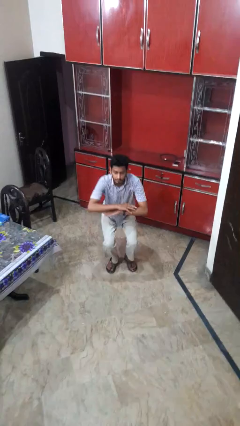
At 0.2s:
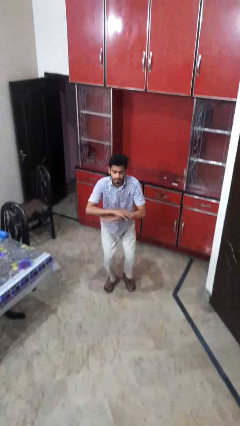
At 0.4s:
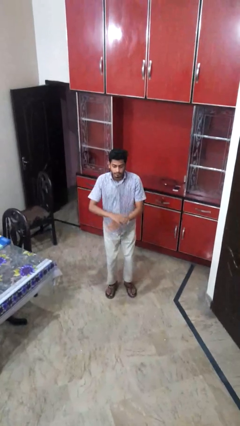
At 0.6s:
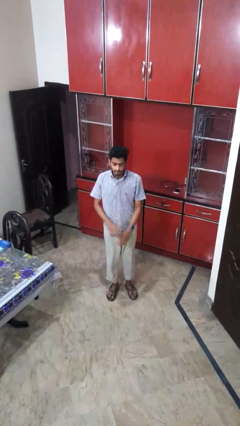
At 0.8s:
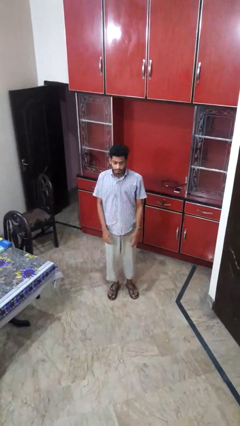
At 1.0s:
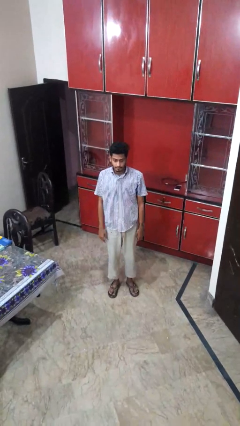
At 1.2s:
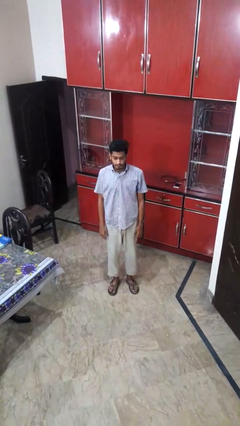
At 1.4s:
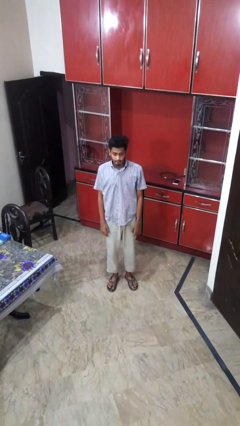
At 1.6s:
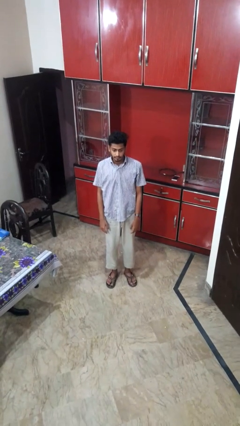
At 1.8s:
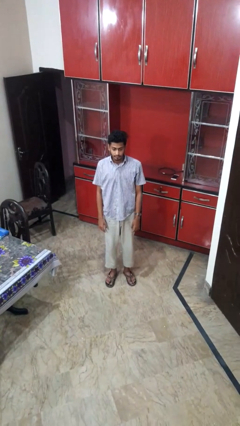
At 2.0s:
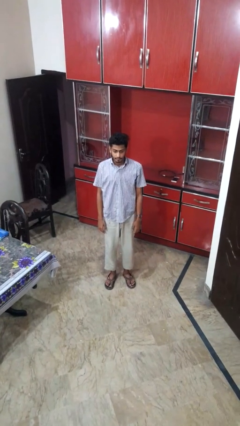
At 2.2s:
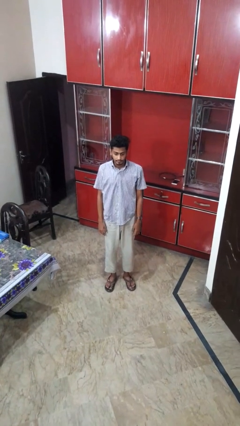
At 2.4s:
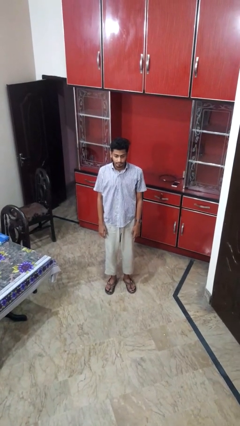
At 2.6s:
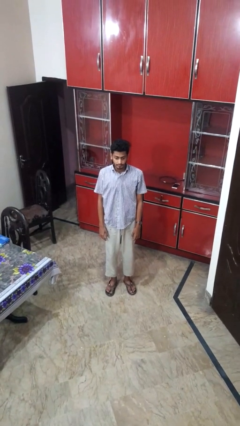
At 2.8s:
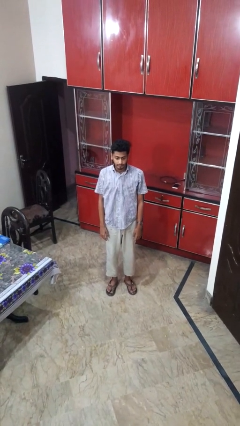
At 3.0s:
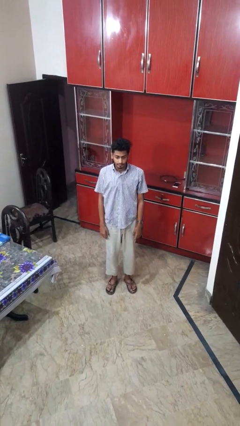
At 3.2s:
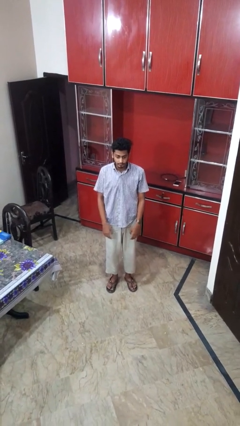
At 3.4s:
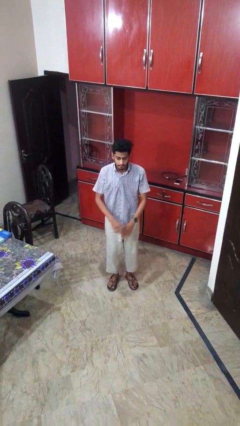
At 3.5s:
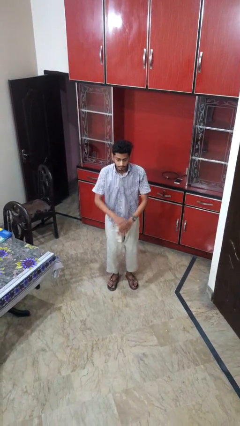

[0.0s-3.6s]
person stands up

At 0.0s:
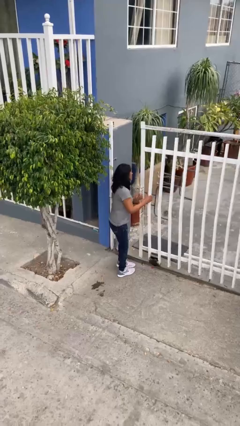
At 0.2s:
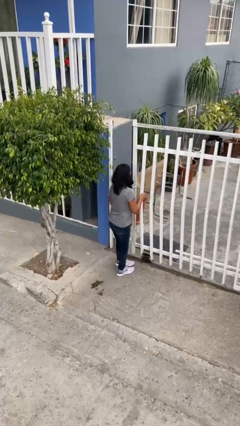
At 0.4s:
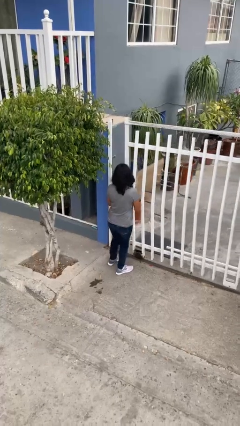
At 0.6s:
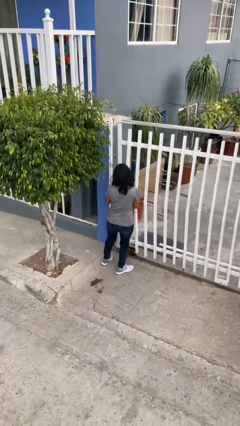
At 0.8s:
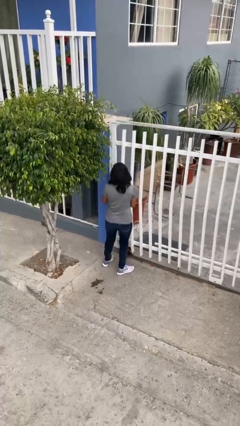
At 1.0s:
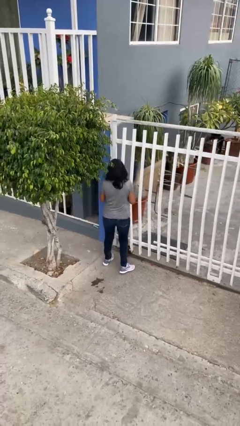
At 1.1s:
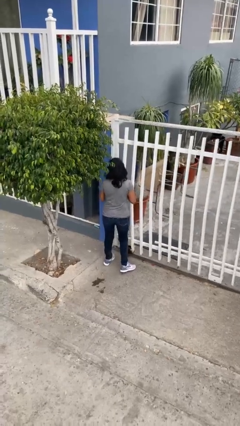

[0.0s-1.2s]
person closes facility door

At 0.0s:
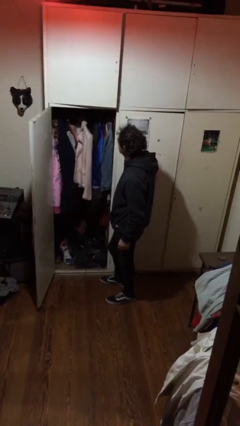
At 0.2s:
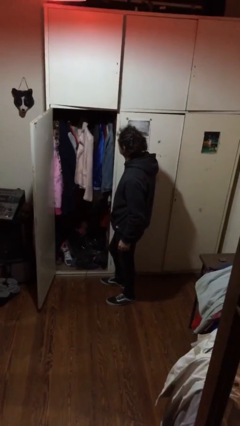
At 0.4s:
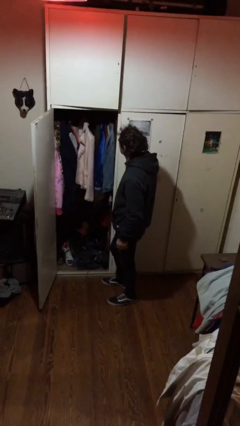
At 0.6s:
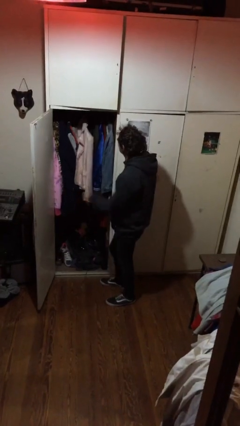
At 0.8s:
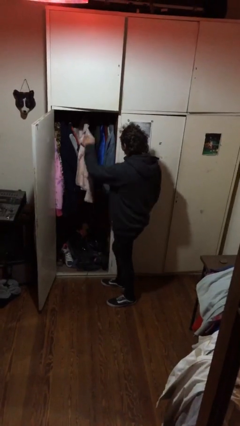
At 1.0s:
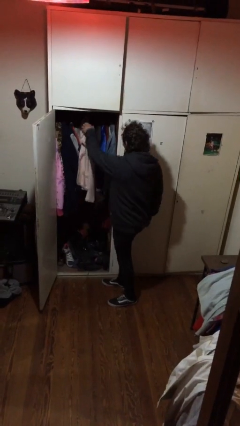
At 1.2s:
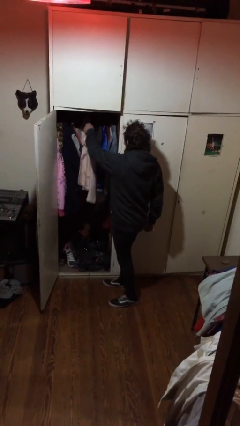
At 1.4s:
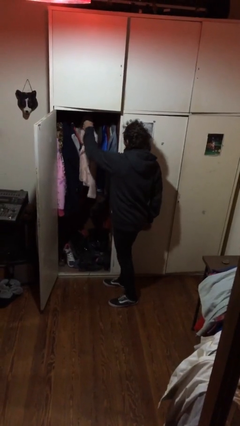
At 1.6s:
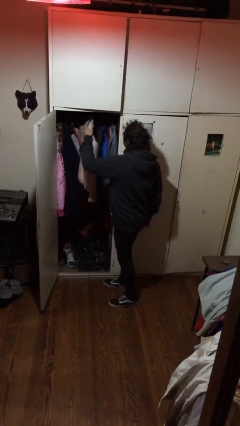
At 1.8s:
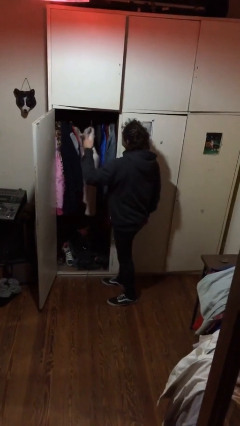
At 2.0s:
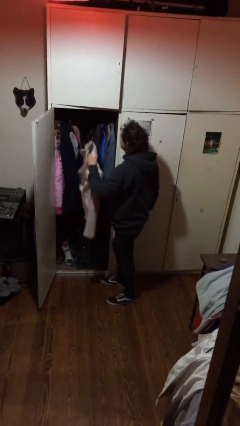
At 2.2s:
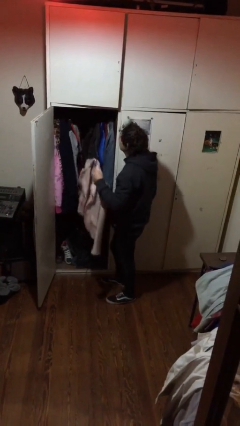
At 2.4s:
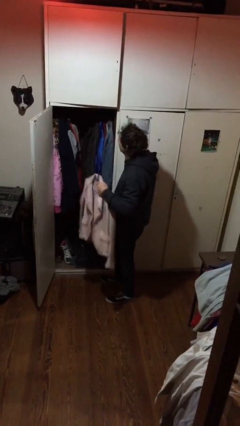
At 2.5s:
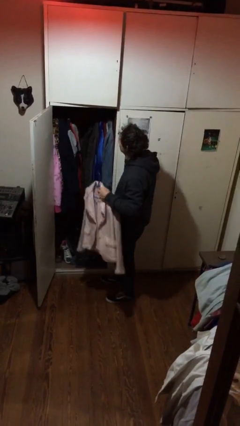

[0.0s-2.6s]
person takes clothes from closet

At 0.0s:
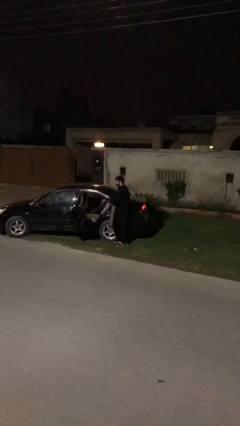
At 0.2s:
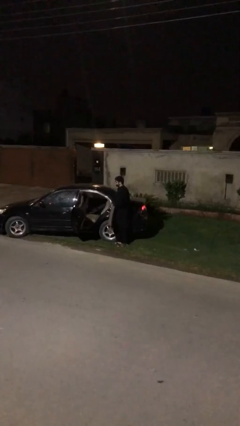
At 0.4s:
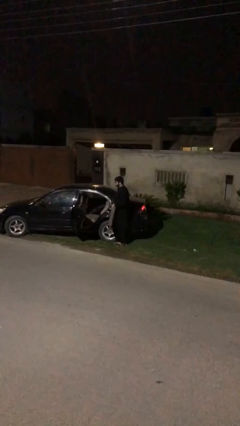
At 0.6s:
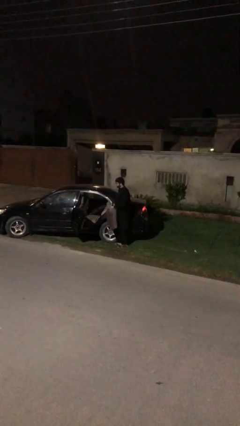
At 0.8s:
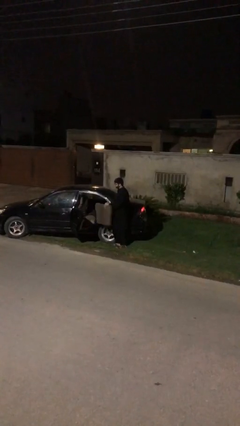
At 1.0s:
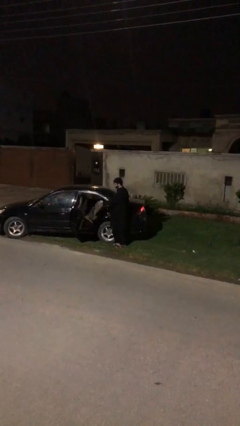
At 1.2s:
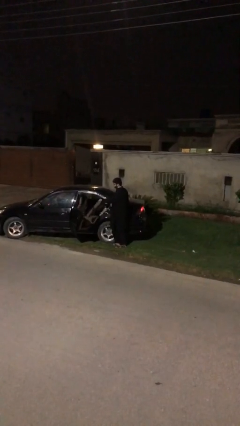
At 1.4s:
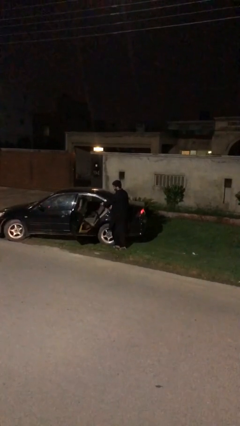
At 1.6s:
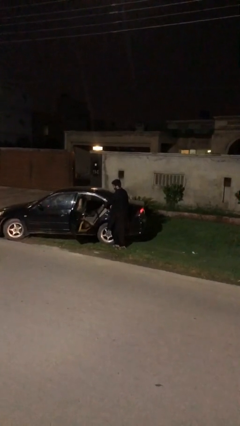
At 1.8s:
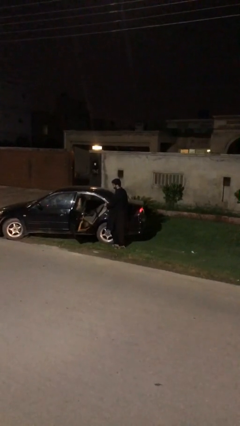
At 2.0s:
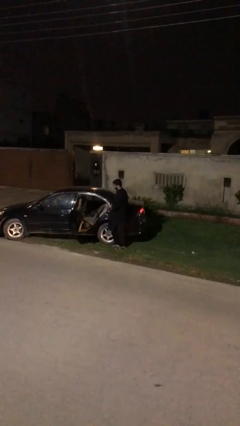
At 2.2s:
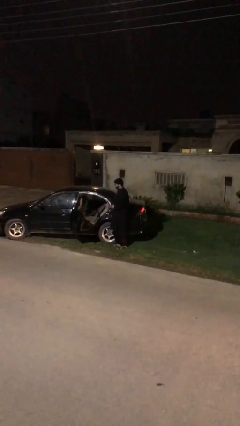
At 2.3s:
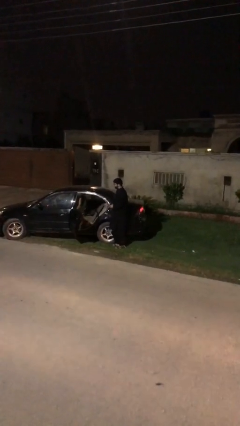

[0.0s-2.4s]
person loads car

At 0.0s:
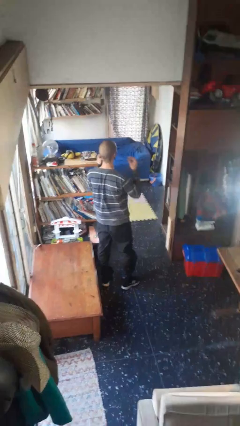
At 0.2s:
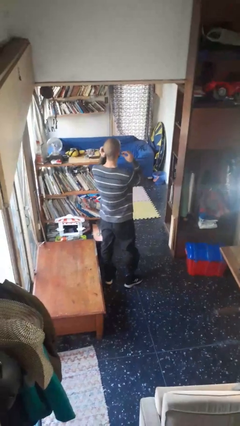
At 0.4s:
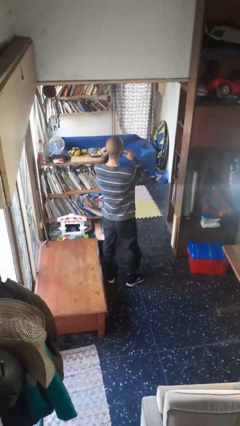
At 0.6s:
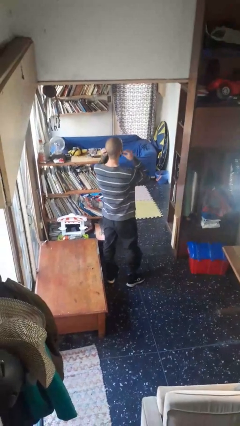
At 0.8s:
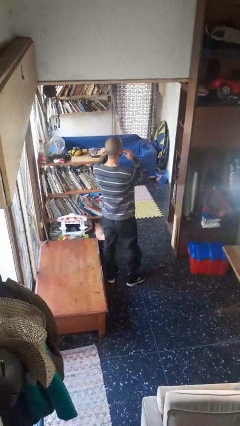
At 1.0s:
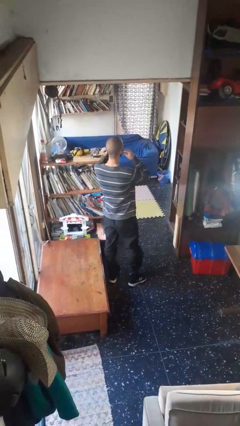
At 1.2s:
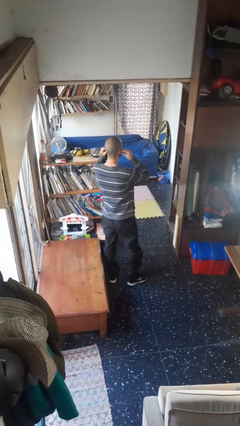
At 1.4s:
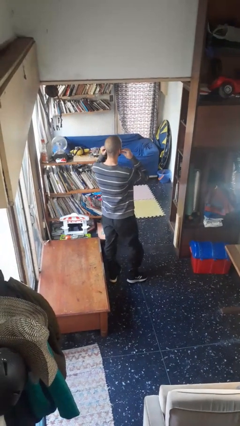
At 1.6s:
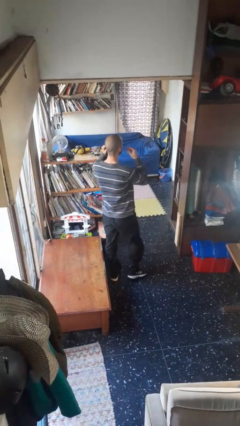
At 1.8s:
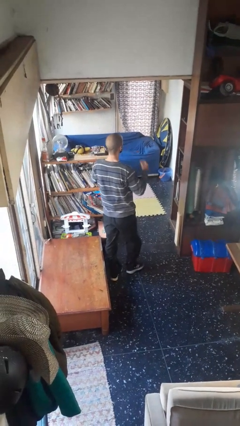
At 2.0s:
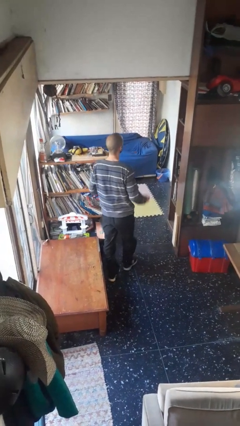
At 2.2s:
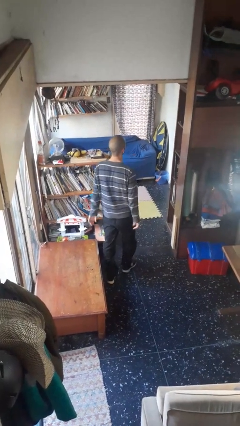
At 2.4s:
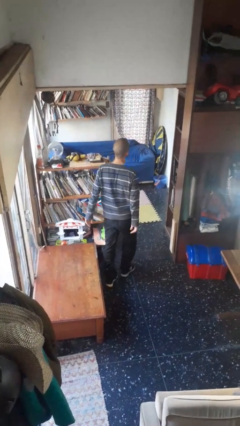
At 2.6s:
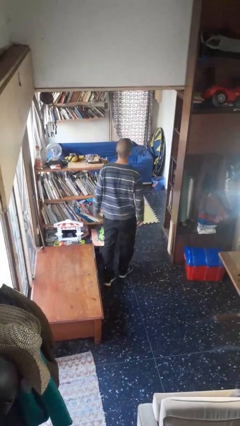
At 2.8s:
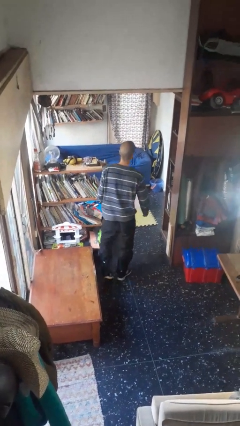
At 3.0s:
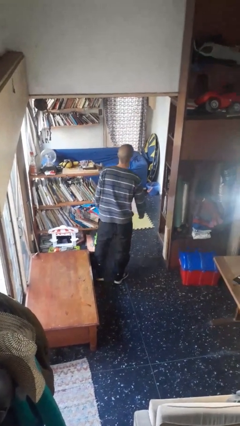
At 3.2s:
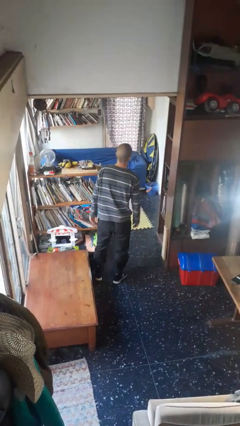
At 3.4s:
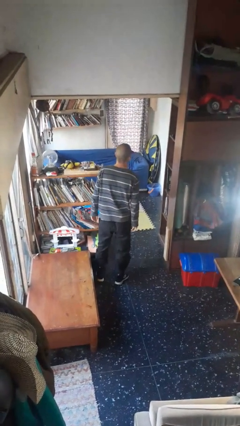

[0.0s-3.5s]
person puts on headphones

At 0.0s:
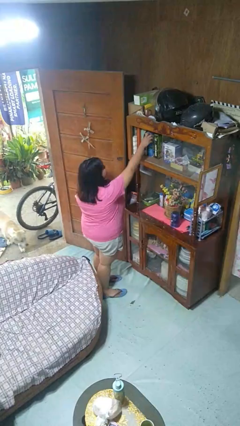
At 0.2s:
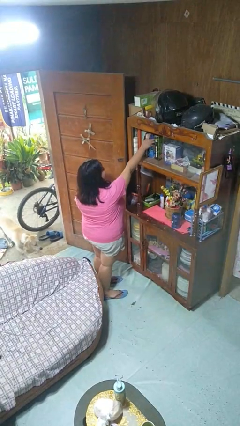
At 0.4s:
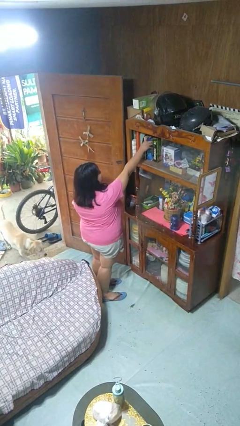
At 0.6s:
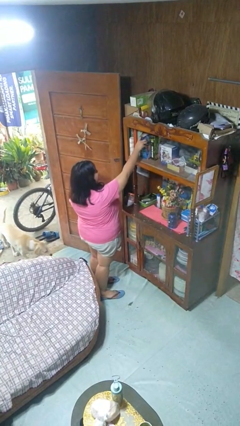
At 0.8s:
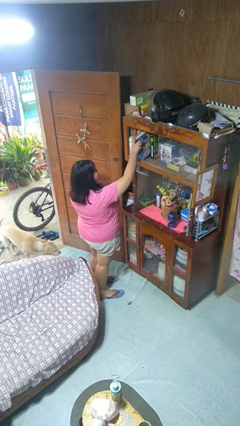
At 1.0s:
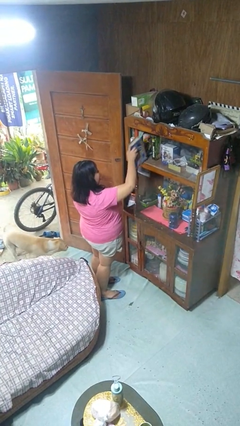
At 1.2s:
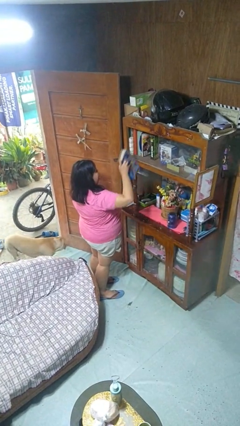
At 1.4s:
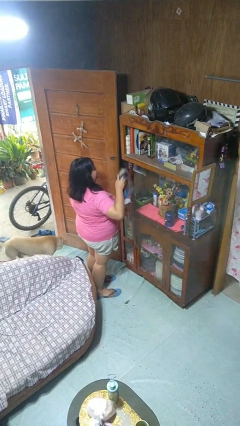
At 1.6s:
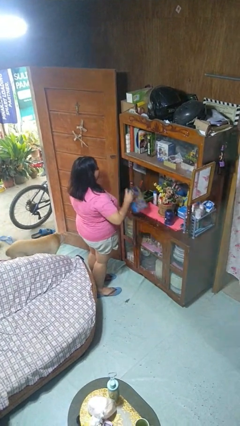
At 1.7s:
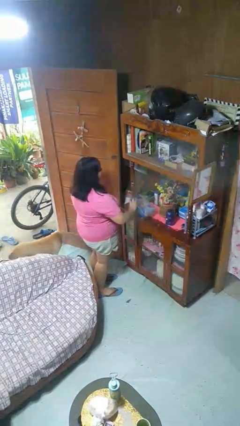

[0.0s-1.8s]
person picks up object from shelf

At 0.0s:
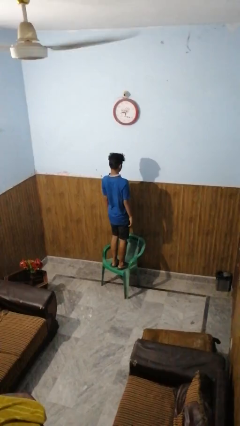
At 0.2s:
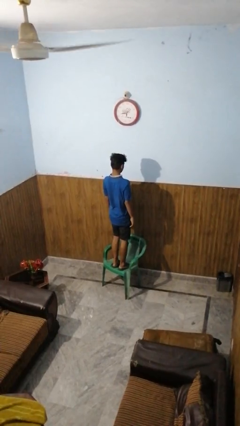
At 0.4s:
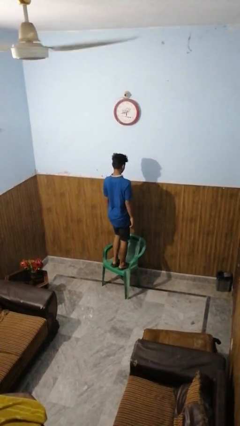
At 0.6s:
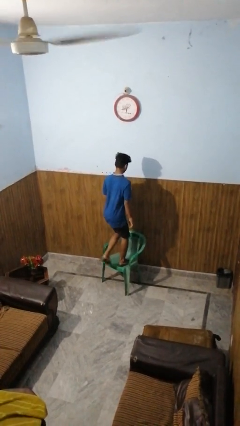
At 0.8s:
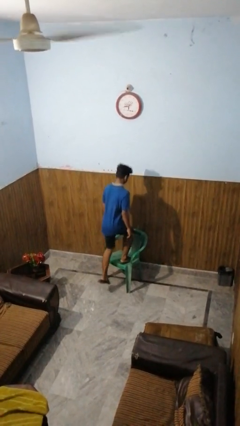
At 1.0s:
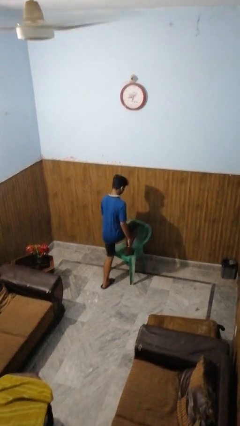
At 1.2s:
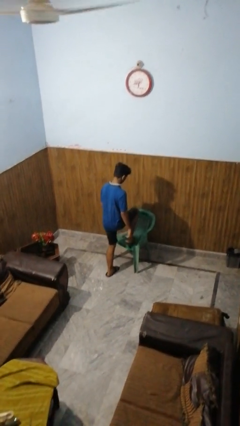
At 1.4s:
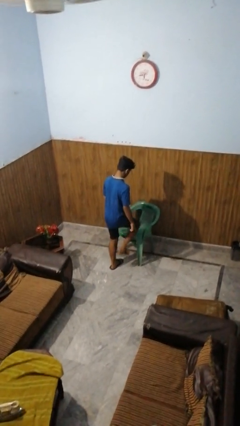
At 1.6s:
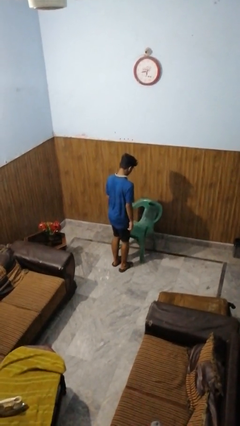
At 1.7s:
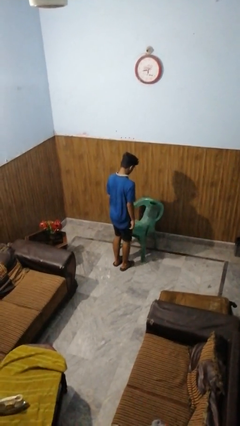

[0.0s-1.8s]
person climbs off chair

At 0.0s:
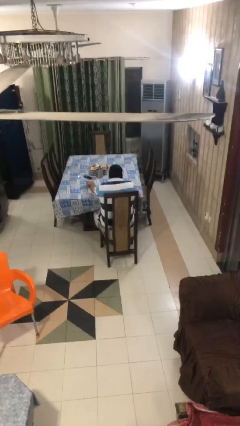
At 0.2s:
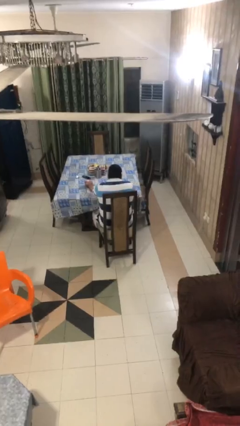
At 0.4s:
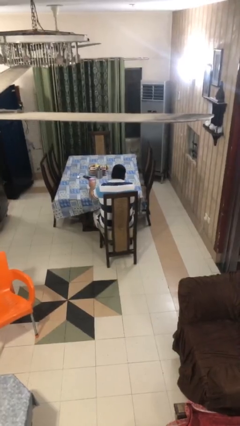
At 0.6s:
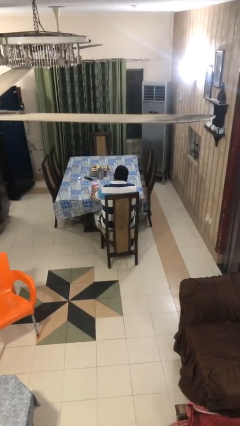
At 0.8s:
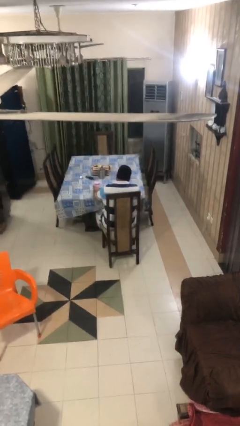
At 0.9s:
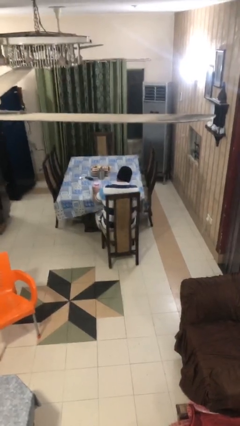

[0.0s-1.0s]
person sets upright glass
